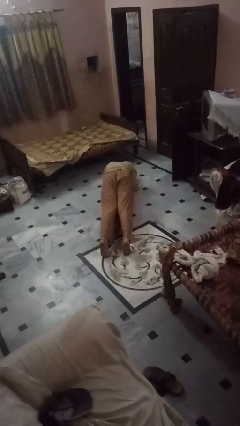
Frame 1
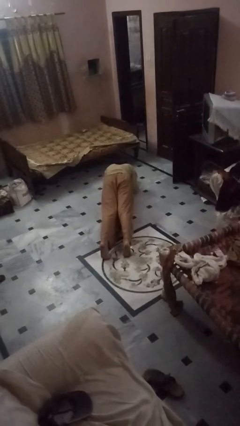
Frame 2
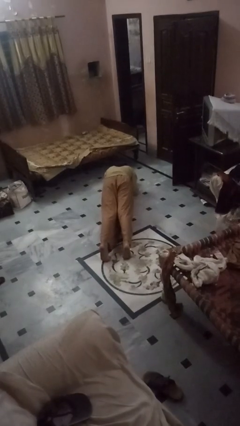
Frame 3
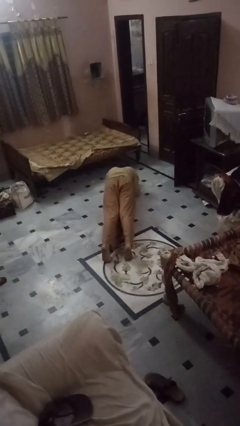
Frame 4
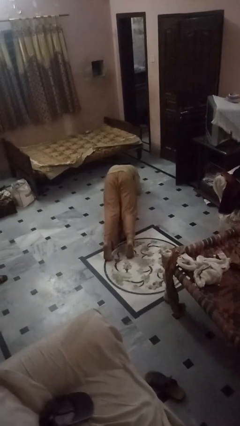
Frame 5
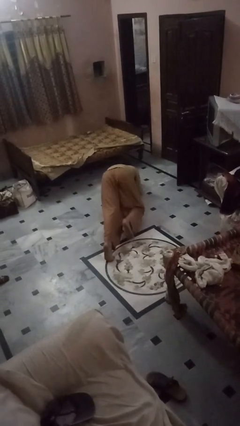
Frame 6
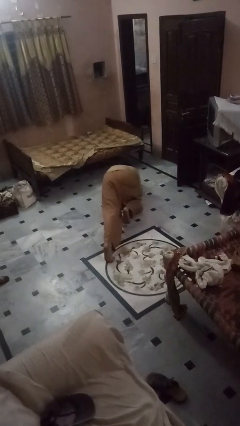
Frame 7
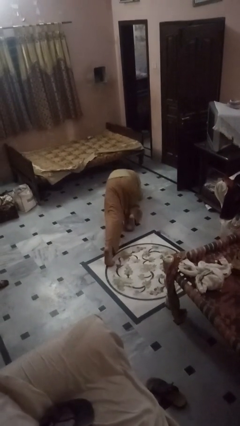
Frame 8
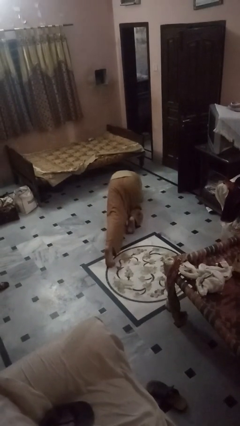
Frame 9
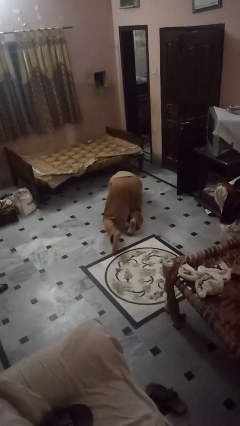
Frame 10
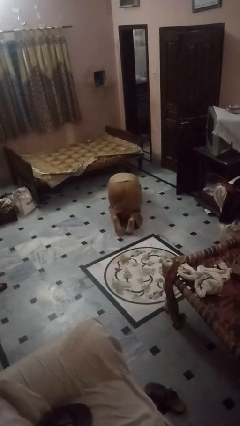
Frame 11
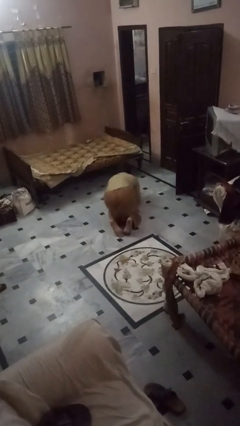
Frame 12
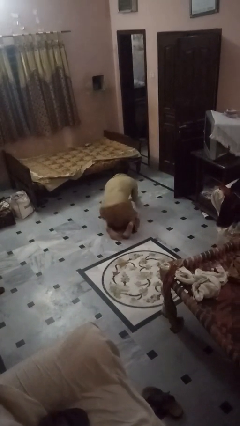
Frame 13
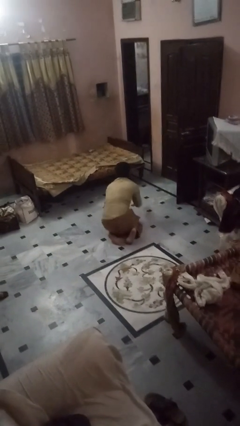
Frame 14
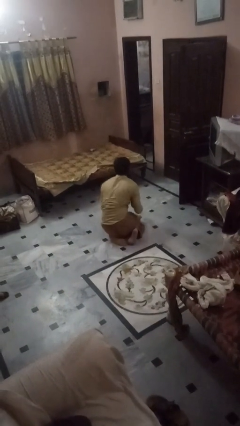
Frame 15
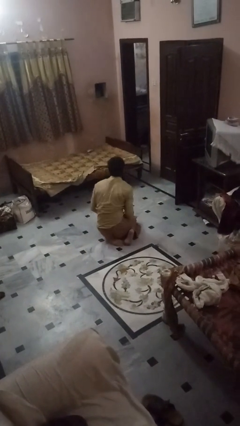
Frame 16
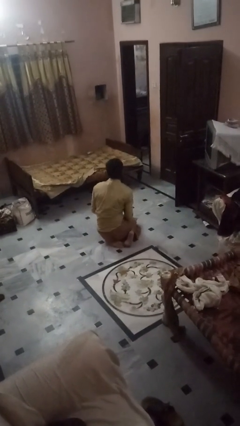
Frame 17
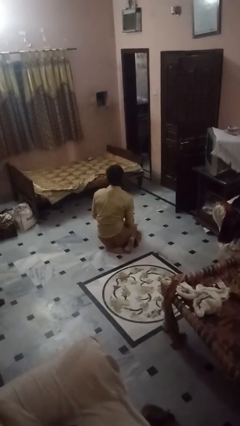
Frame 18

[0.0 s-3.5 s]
person stands up from floor

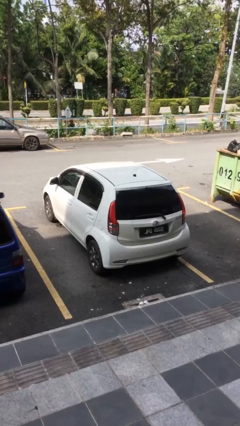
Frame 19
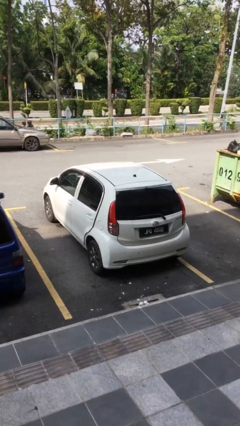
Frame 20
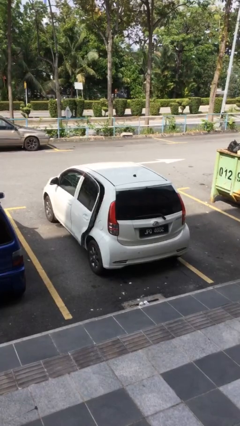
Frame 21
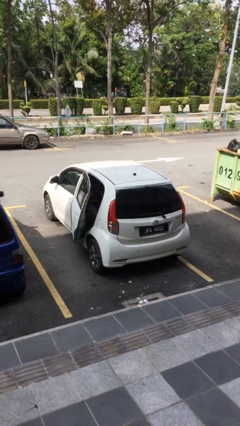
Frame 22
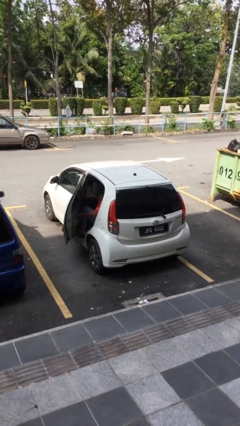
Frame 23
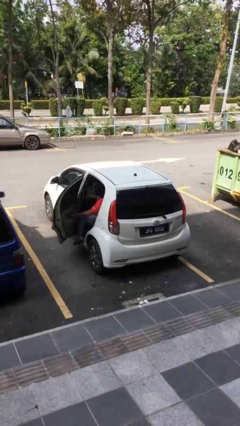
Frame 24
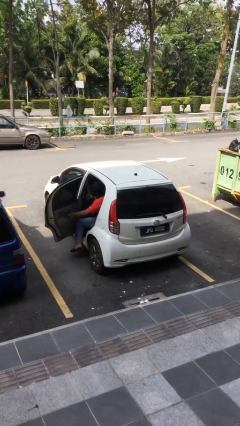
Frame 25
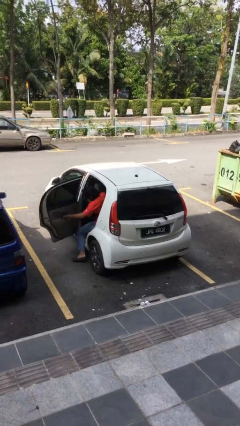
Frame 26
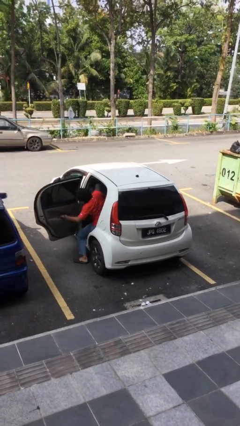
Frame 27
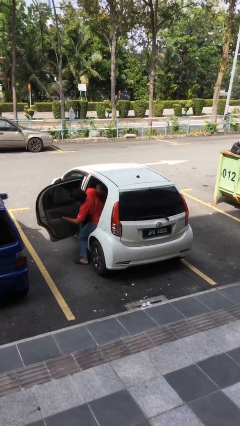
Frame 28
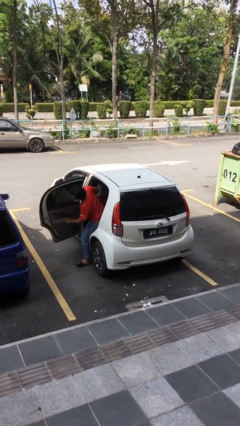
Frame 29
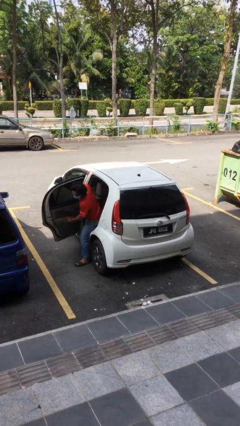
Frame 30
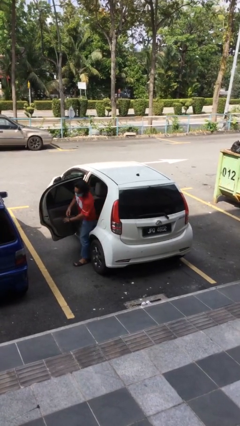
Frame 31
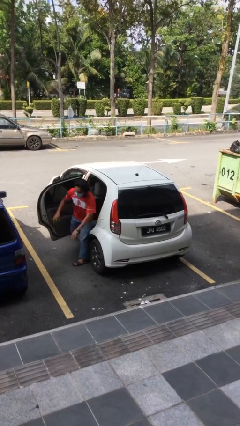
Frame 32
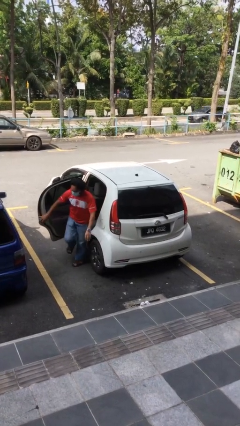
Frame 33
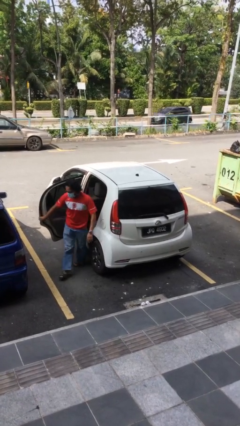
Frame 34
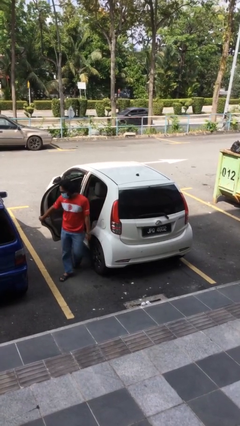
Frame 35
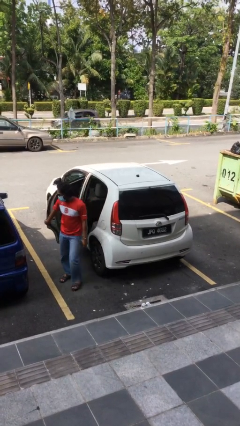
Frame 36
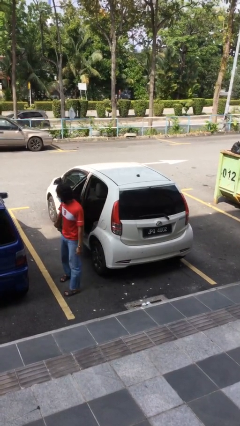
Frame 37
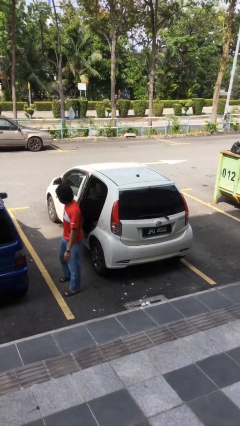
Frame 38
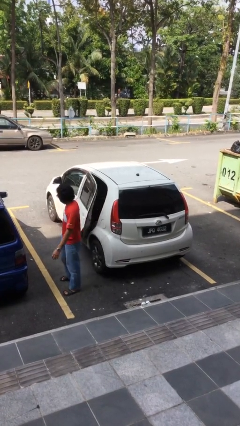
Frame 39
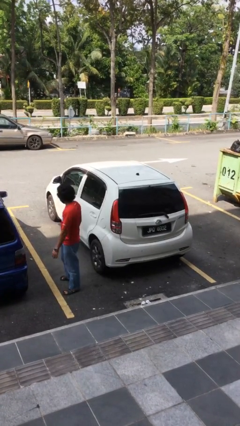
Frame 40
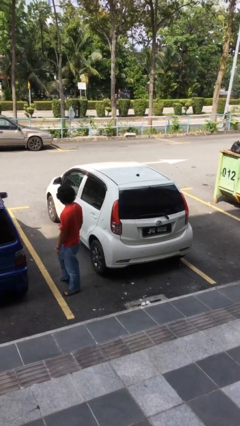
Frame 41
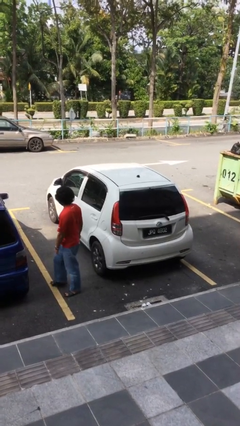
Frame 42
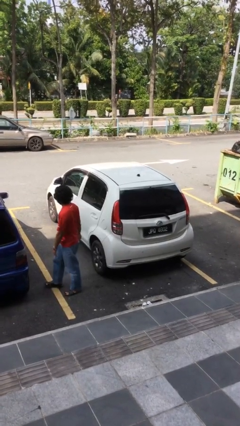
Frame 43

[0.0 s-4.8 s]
car drops off person

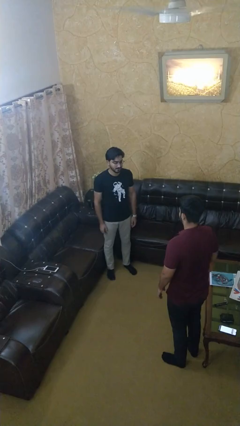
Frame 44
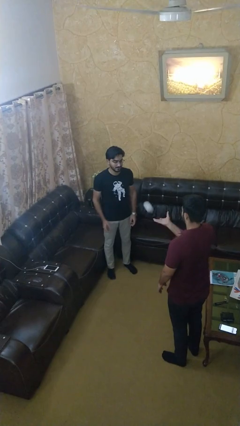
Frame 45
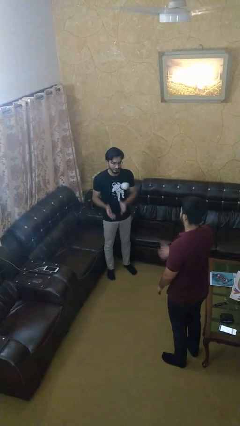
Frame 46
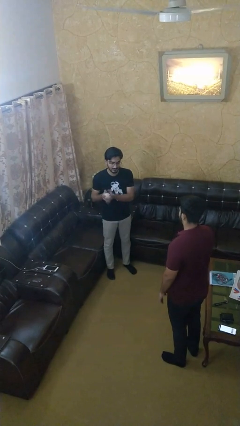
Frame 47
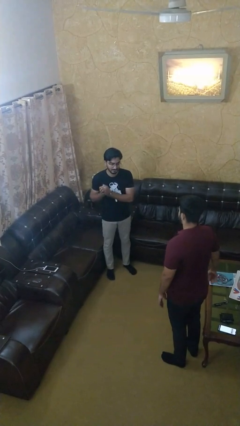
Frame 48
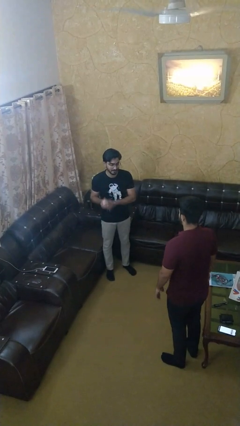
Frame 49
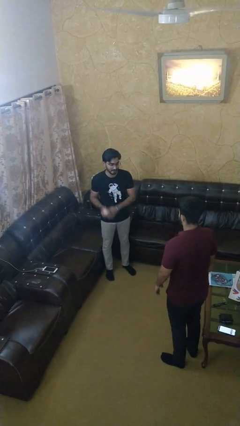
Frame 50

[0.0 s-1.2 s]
person catches object from person

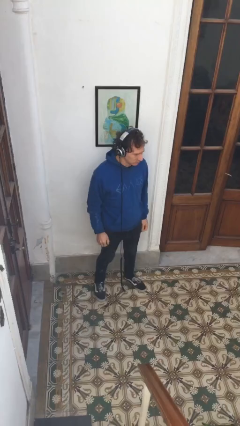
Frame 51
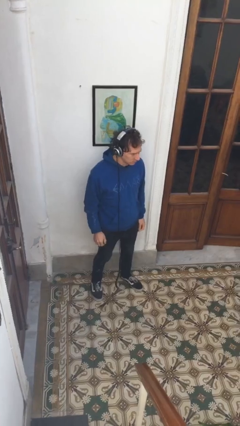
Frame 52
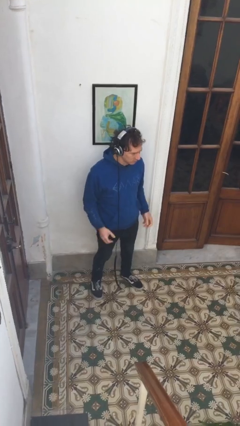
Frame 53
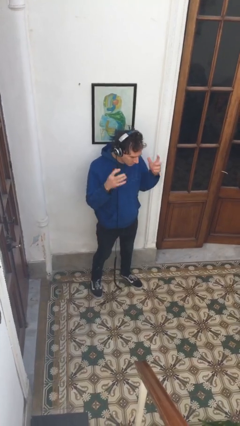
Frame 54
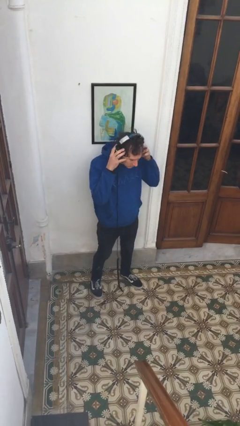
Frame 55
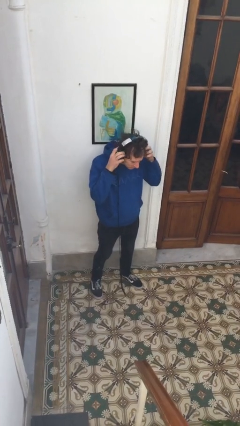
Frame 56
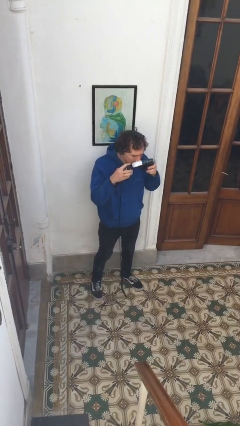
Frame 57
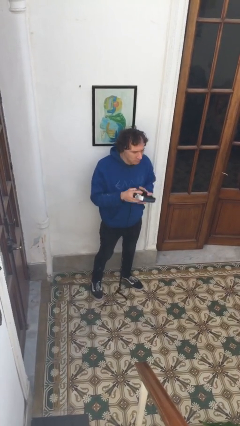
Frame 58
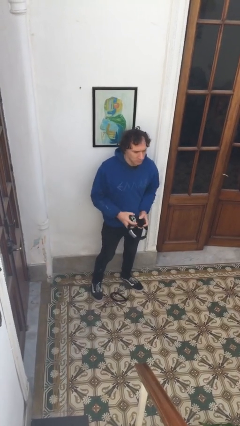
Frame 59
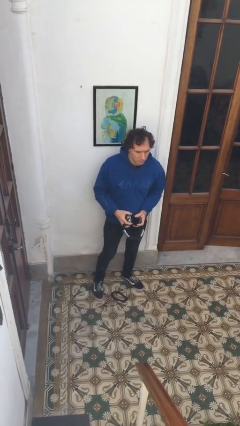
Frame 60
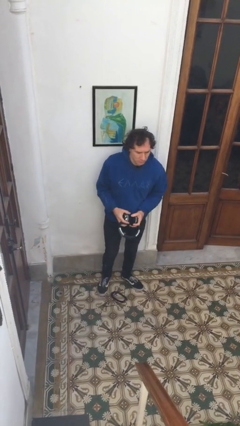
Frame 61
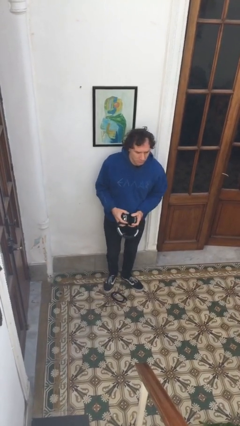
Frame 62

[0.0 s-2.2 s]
person takes off headphones

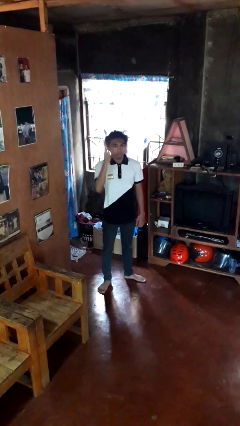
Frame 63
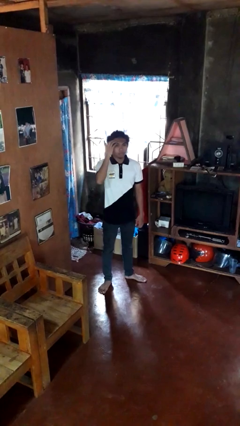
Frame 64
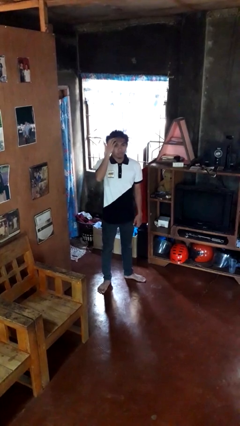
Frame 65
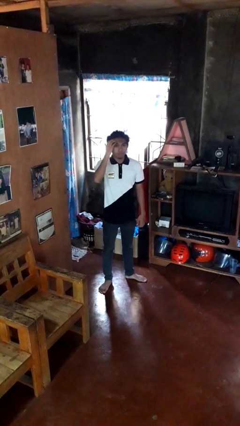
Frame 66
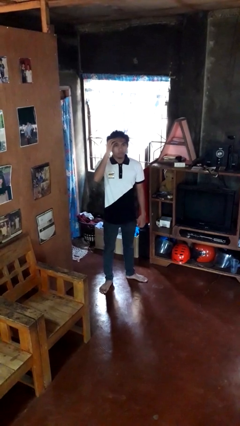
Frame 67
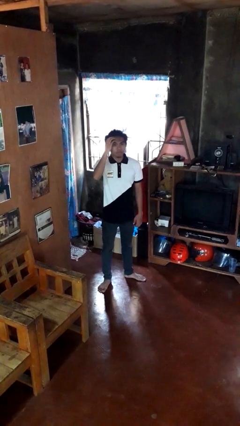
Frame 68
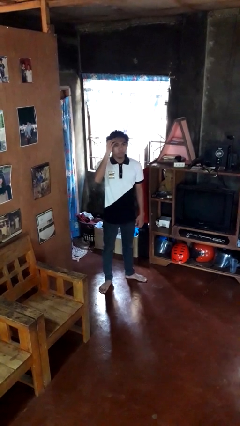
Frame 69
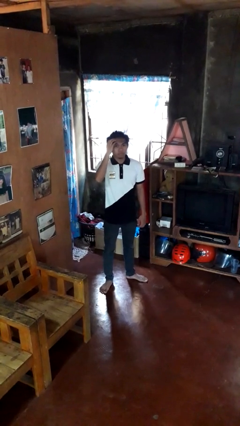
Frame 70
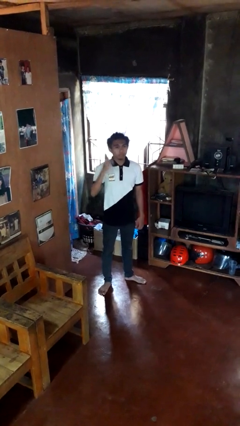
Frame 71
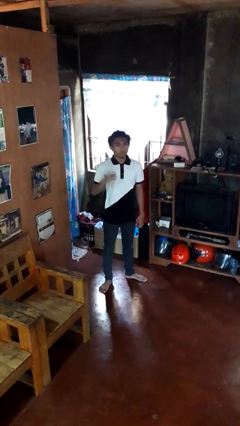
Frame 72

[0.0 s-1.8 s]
person scratches face

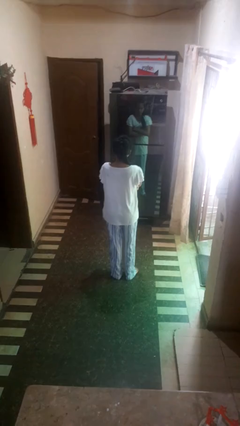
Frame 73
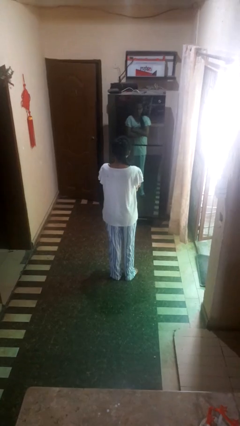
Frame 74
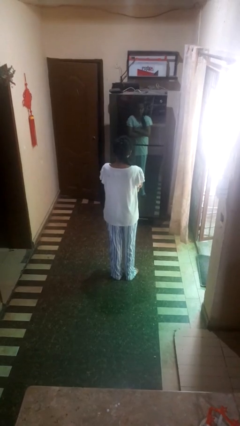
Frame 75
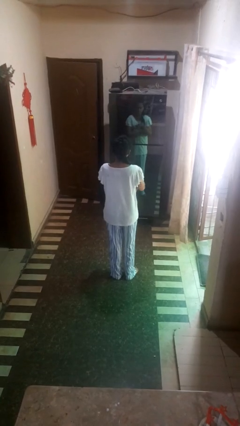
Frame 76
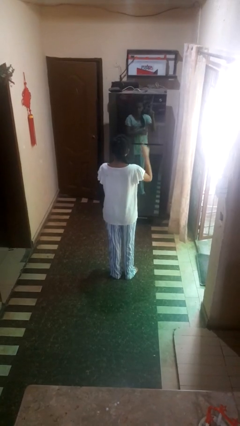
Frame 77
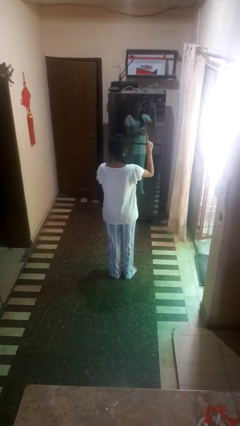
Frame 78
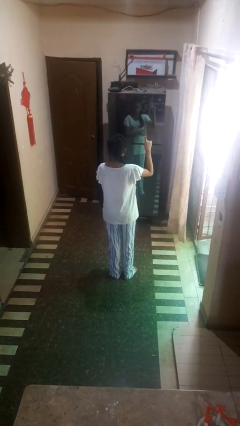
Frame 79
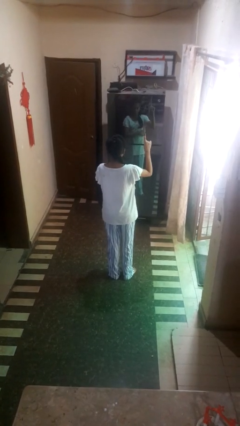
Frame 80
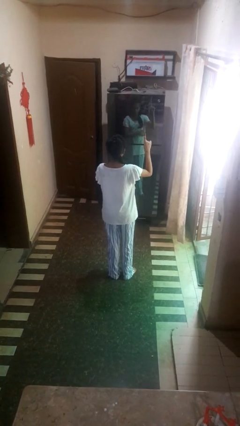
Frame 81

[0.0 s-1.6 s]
person gestures number one

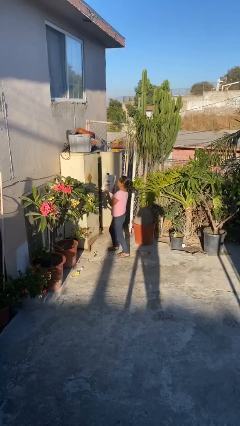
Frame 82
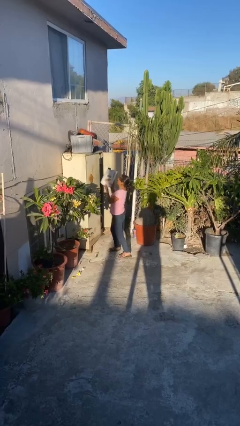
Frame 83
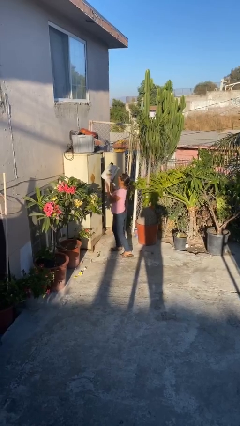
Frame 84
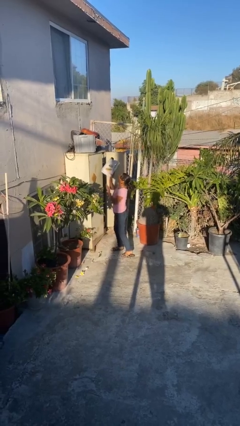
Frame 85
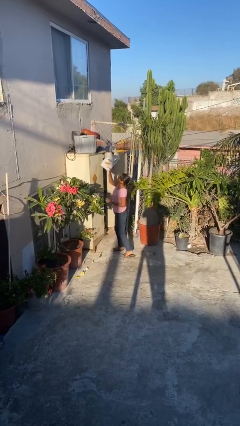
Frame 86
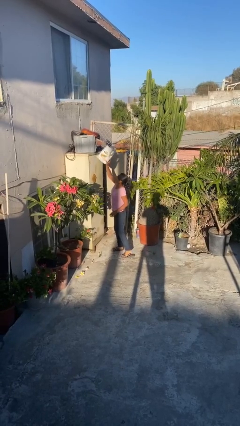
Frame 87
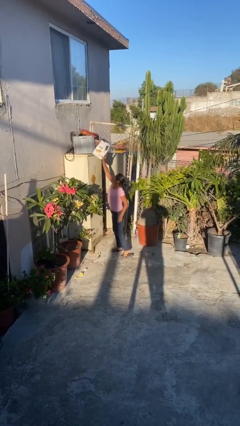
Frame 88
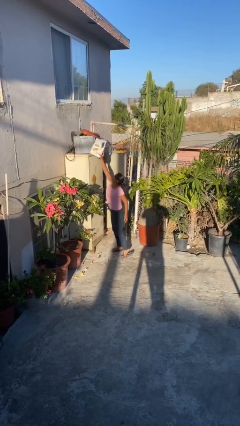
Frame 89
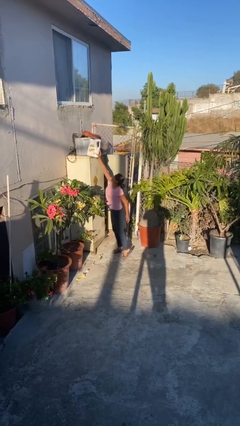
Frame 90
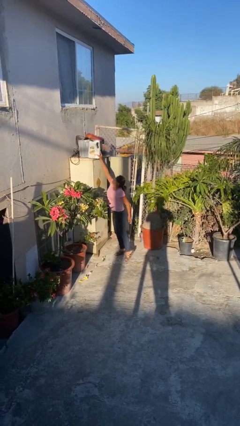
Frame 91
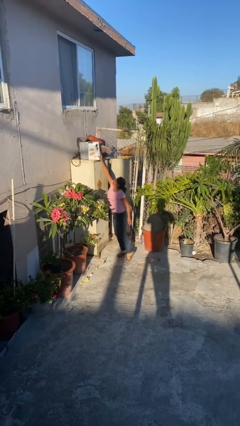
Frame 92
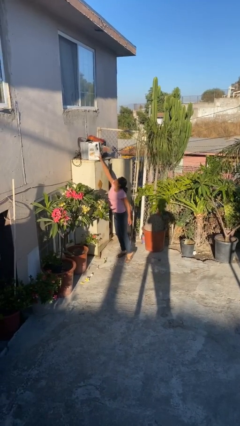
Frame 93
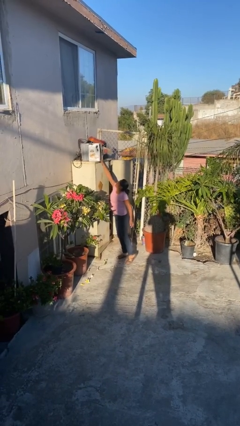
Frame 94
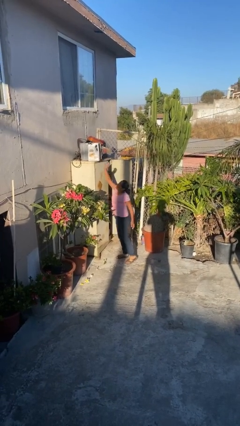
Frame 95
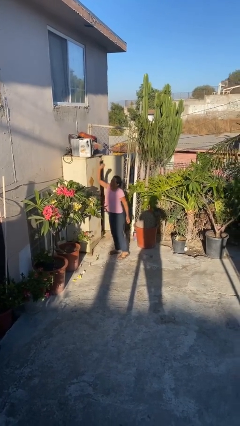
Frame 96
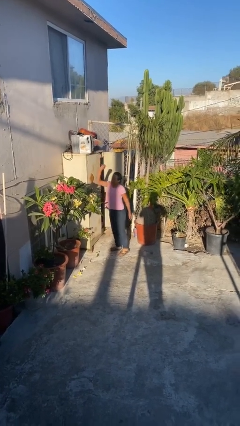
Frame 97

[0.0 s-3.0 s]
person puts down object on shelf
